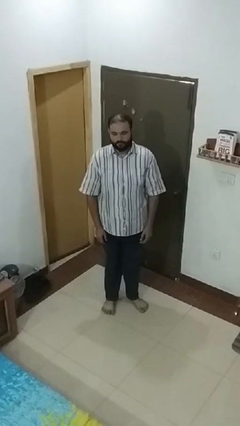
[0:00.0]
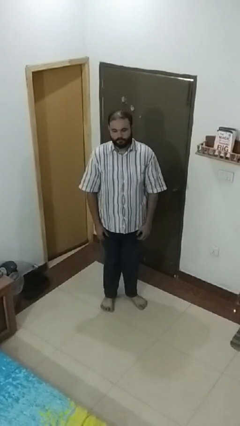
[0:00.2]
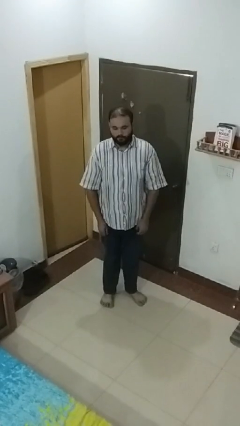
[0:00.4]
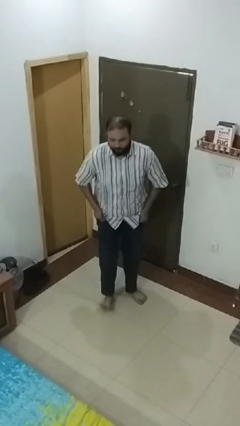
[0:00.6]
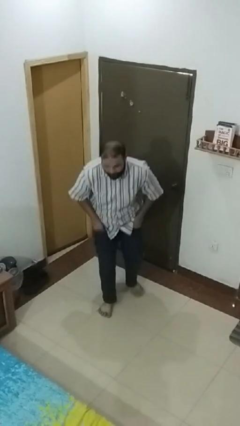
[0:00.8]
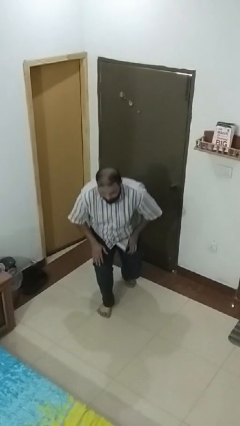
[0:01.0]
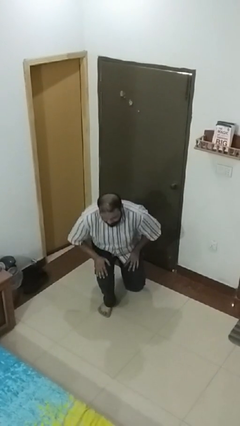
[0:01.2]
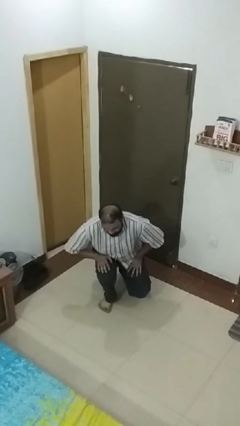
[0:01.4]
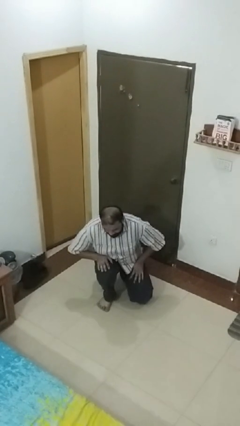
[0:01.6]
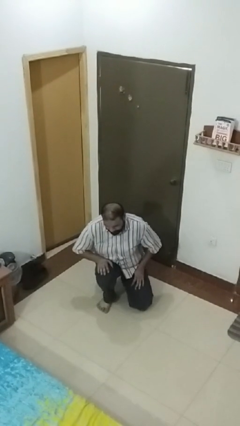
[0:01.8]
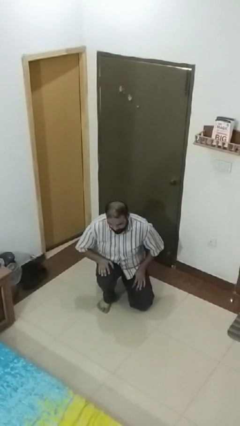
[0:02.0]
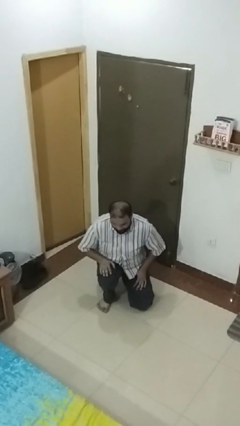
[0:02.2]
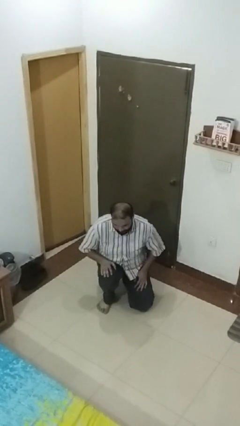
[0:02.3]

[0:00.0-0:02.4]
person kneels

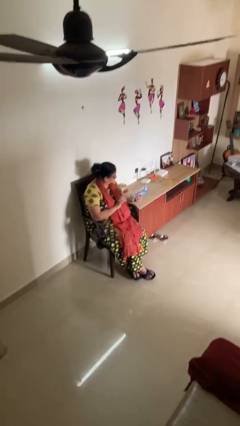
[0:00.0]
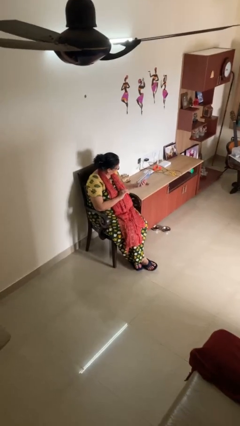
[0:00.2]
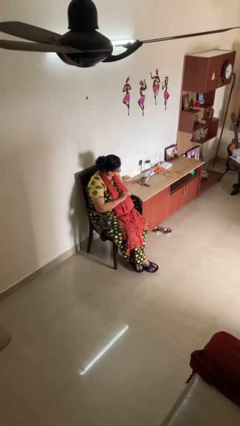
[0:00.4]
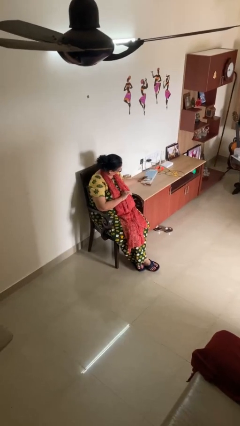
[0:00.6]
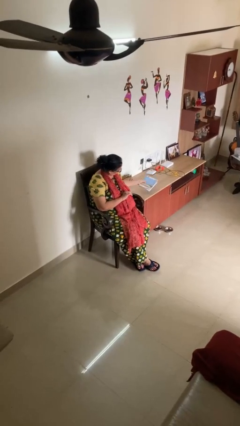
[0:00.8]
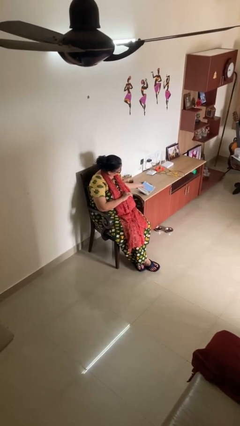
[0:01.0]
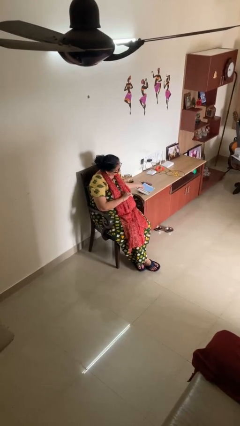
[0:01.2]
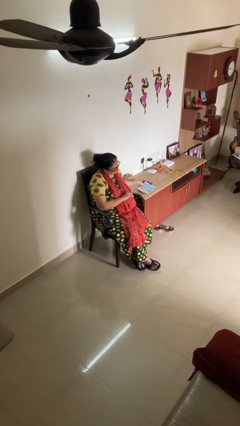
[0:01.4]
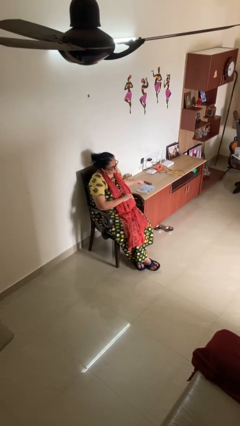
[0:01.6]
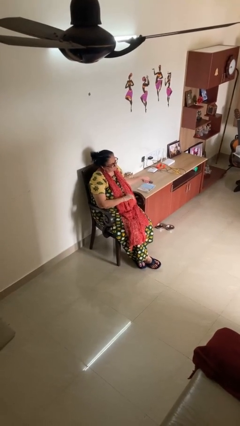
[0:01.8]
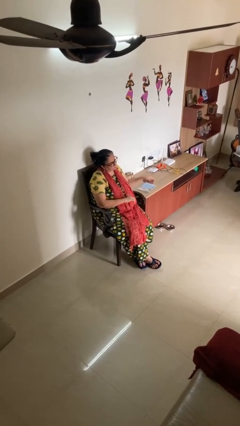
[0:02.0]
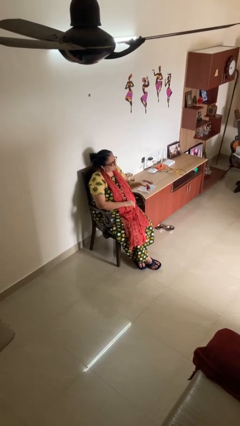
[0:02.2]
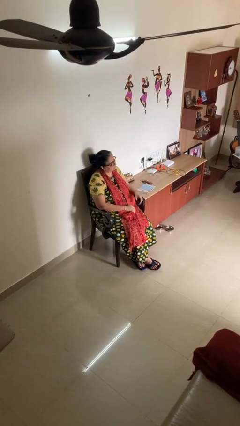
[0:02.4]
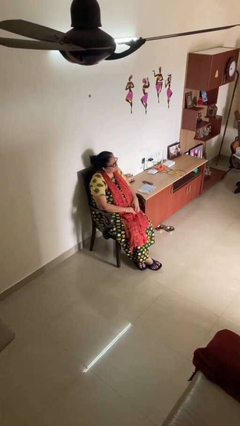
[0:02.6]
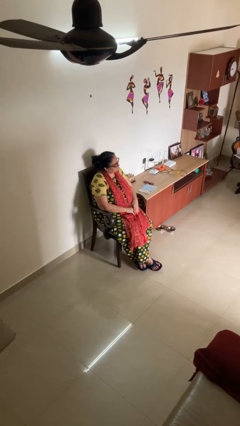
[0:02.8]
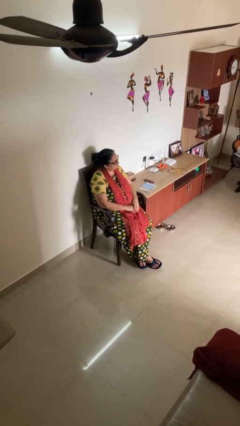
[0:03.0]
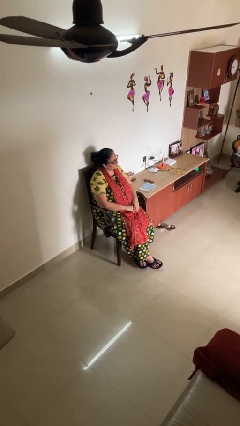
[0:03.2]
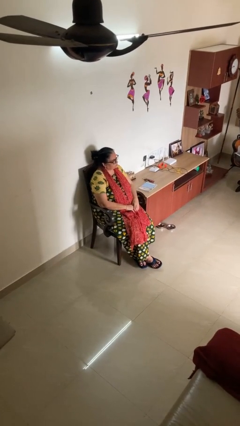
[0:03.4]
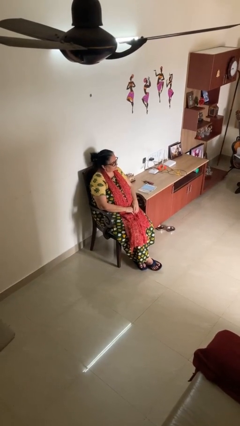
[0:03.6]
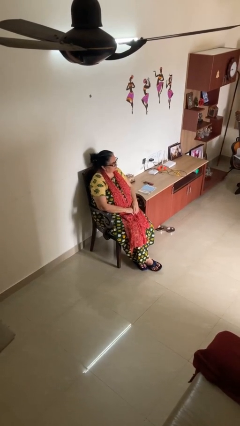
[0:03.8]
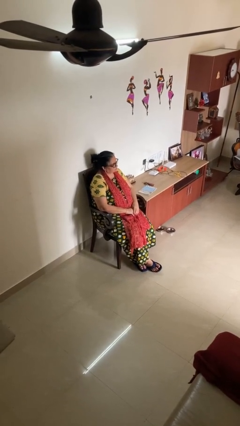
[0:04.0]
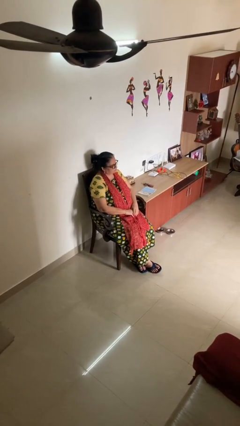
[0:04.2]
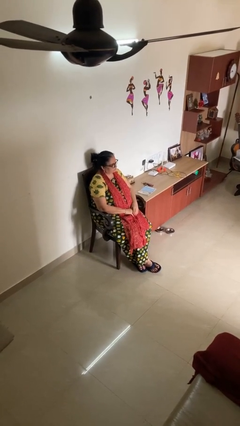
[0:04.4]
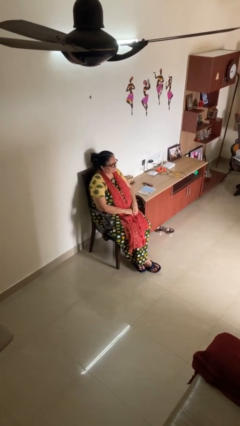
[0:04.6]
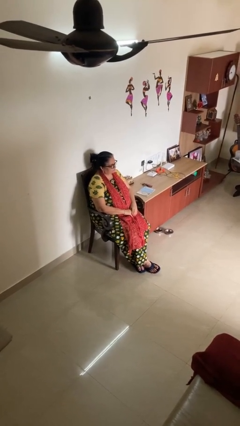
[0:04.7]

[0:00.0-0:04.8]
person puts down object on table

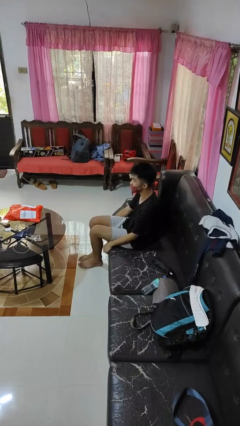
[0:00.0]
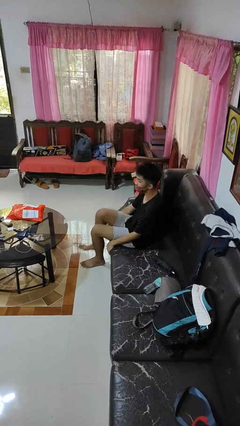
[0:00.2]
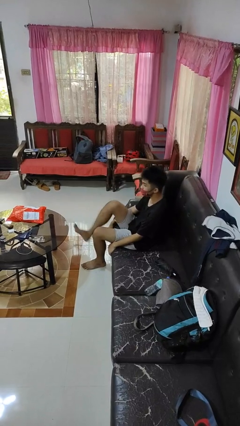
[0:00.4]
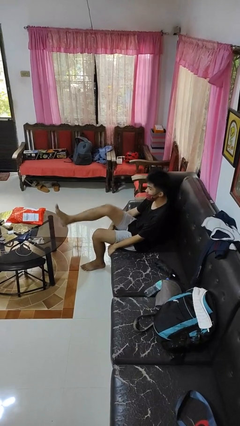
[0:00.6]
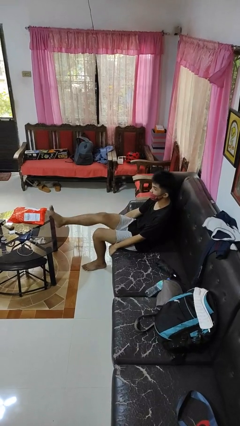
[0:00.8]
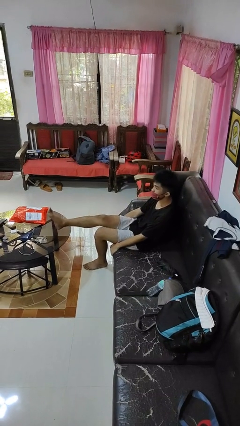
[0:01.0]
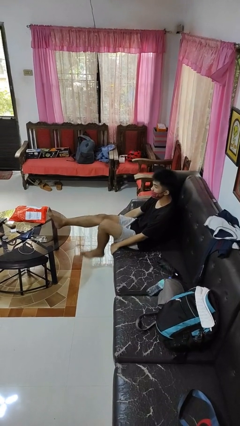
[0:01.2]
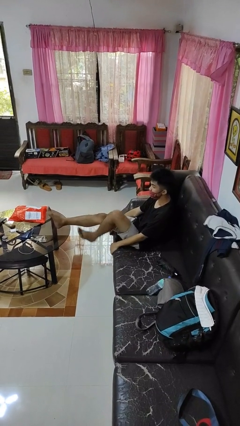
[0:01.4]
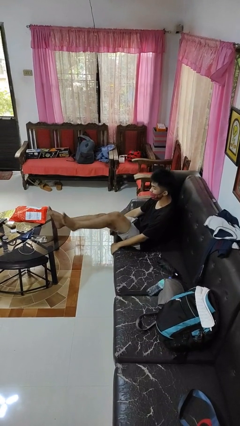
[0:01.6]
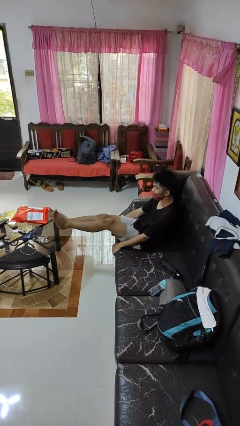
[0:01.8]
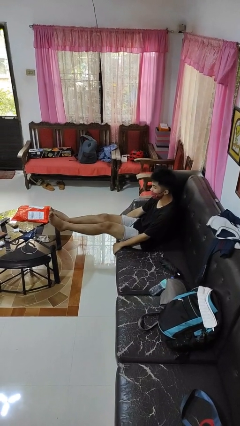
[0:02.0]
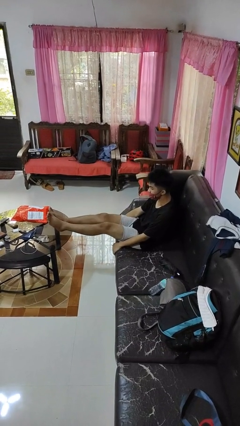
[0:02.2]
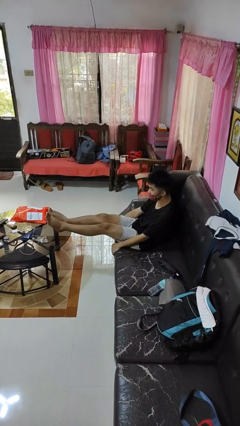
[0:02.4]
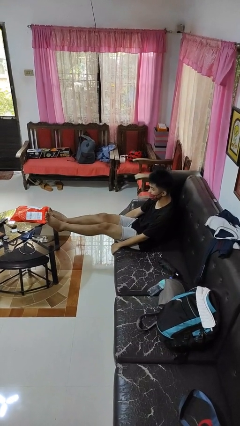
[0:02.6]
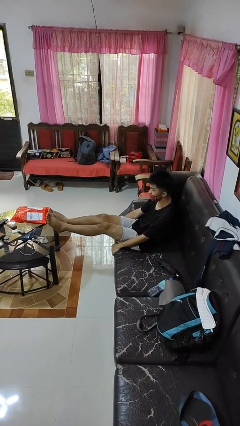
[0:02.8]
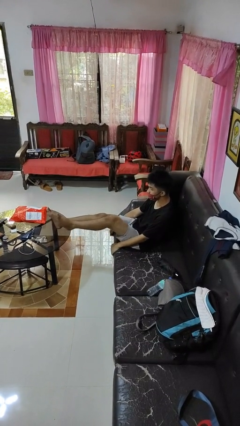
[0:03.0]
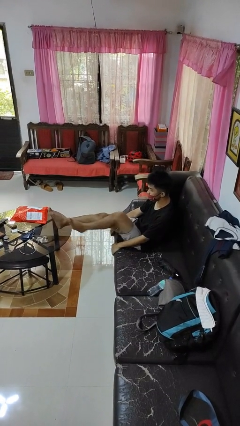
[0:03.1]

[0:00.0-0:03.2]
person puts feet up

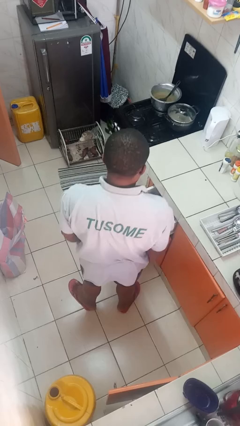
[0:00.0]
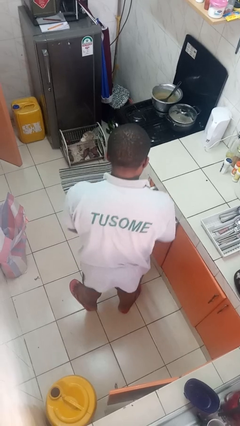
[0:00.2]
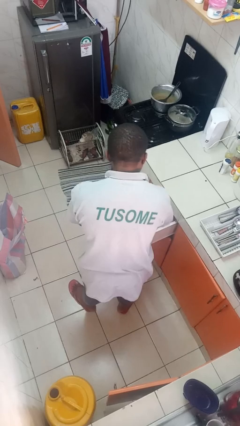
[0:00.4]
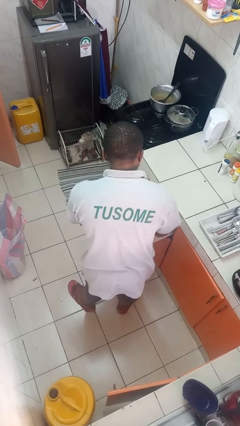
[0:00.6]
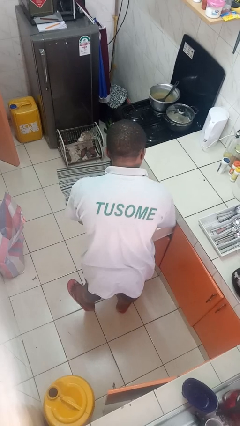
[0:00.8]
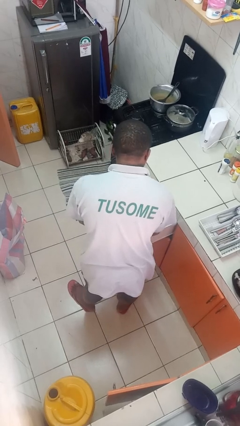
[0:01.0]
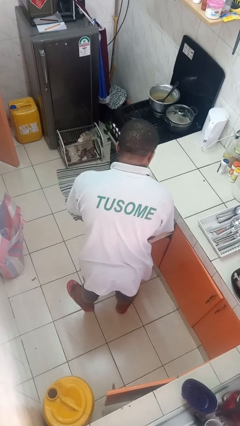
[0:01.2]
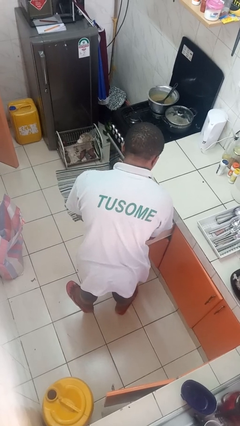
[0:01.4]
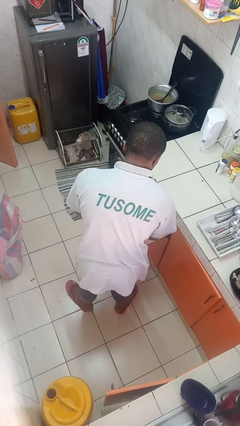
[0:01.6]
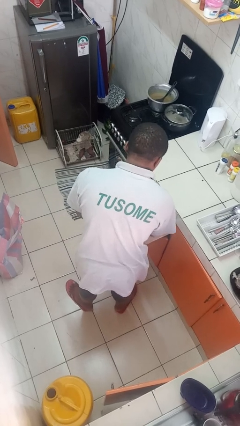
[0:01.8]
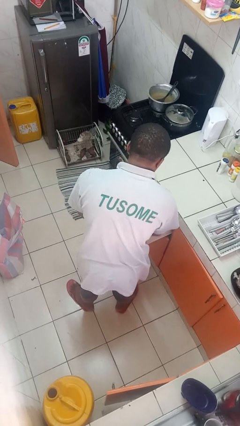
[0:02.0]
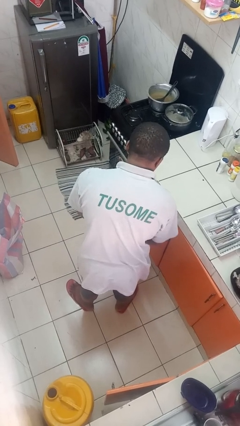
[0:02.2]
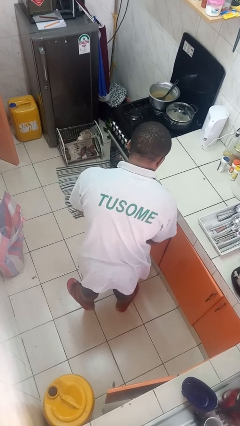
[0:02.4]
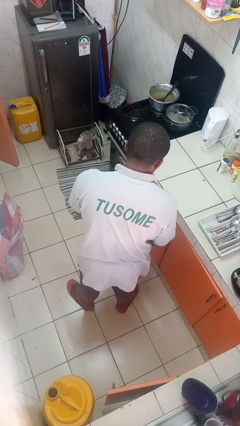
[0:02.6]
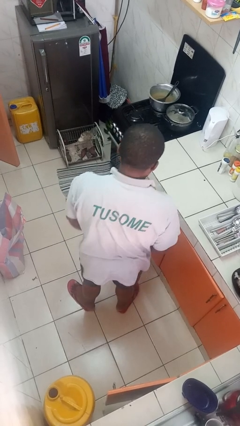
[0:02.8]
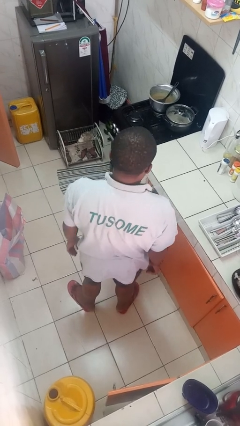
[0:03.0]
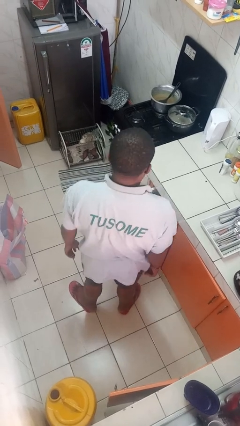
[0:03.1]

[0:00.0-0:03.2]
person searches in kitchen drawer

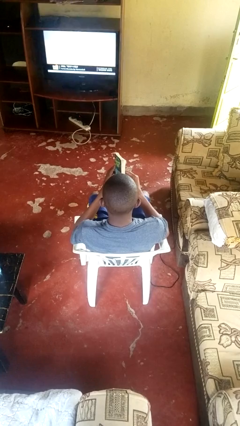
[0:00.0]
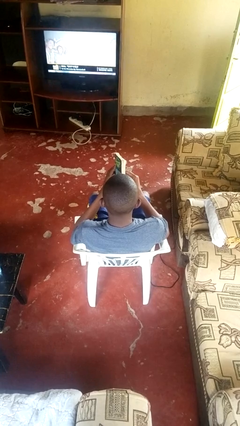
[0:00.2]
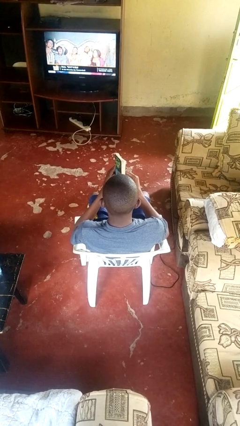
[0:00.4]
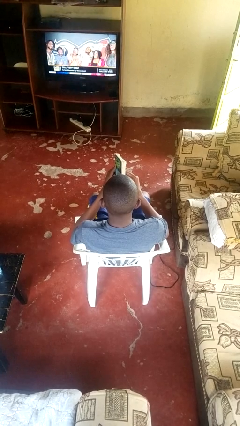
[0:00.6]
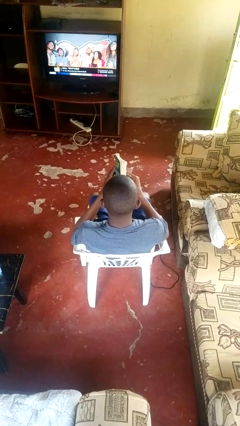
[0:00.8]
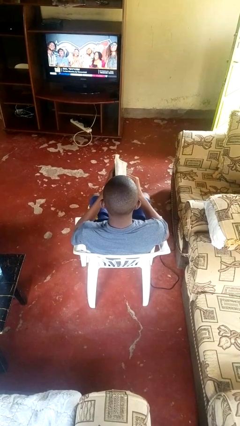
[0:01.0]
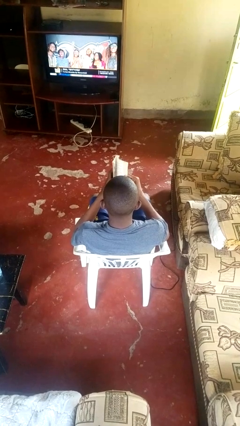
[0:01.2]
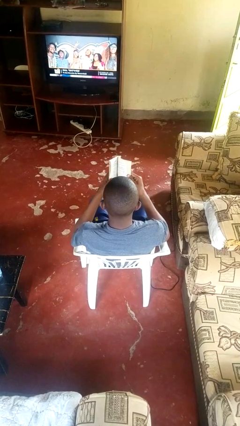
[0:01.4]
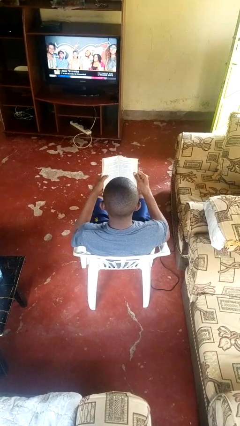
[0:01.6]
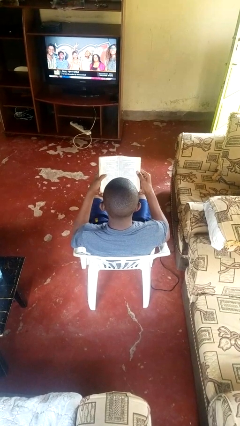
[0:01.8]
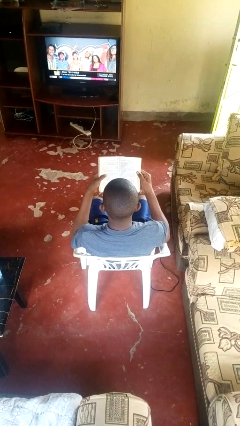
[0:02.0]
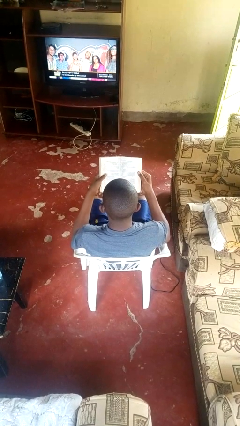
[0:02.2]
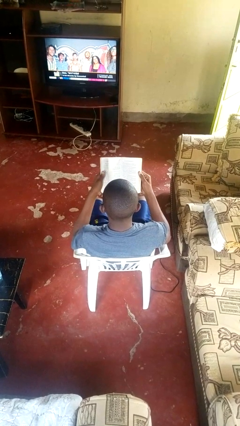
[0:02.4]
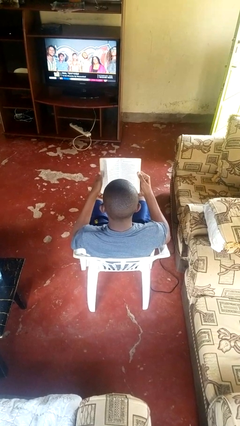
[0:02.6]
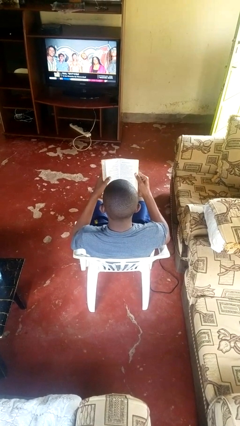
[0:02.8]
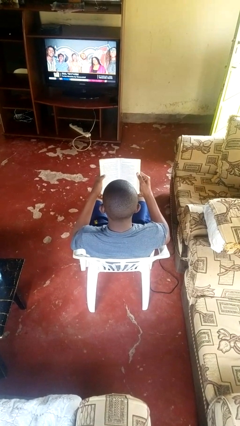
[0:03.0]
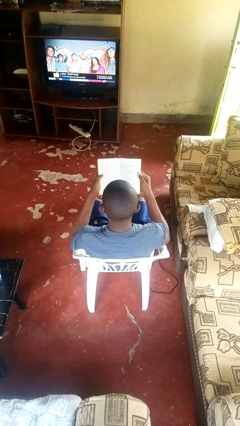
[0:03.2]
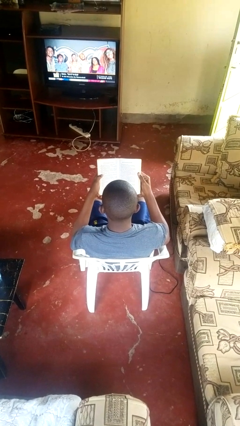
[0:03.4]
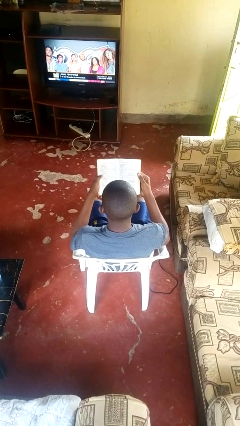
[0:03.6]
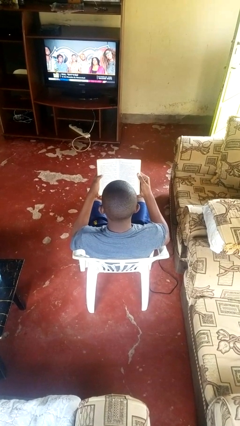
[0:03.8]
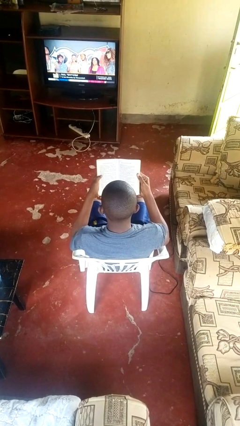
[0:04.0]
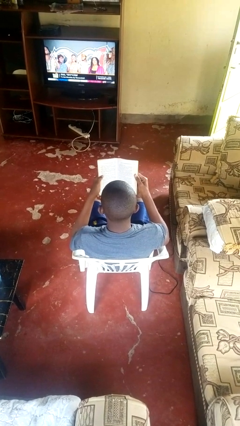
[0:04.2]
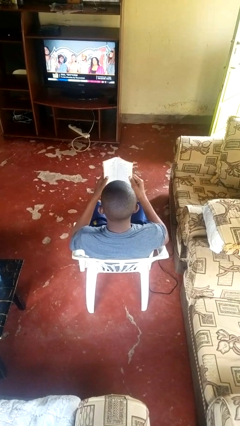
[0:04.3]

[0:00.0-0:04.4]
person reads book
